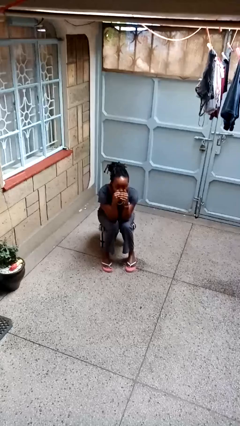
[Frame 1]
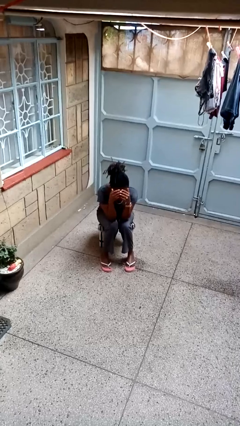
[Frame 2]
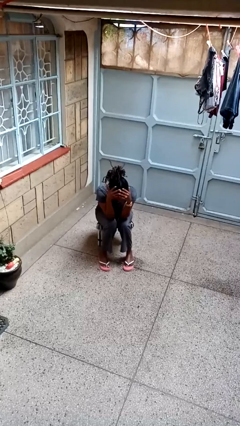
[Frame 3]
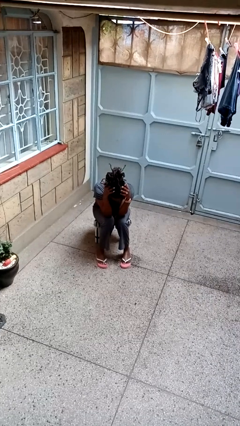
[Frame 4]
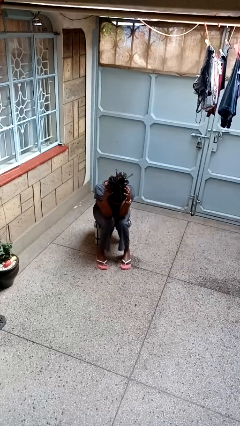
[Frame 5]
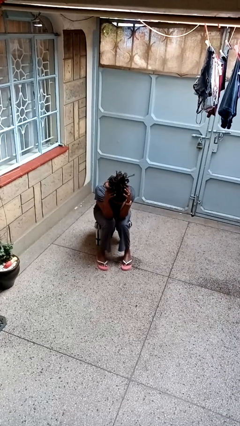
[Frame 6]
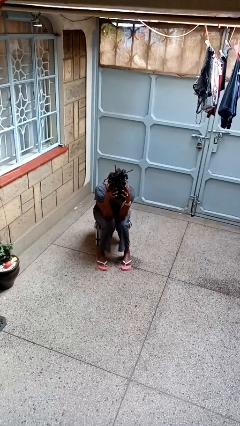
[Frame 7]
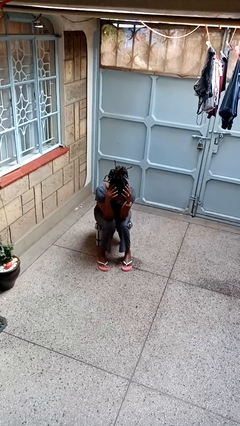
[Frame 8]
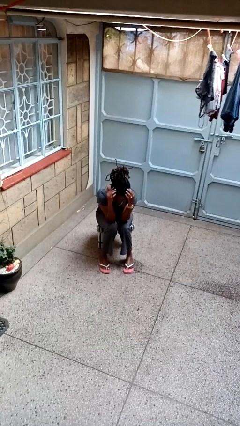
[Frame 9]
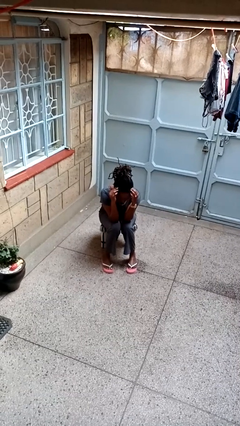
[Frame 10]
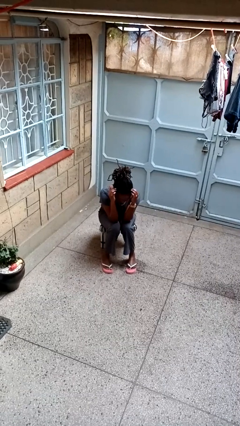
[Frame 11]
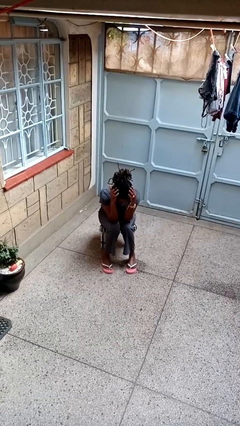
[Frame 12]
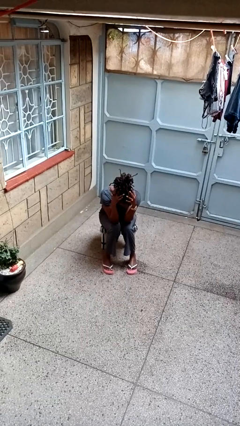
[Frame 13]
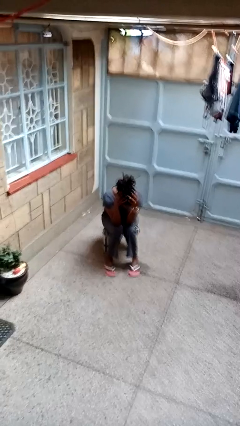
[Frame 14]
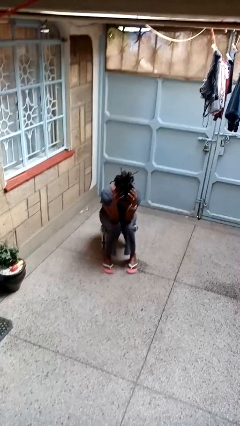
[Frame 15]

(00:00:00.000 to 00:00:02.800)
person strokes hair

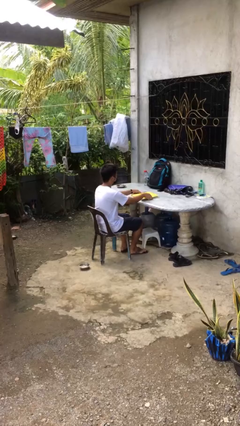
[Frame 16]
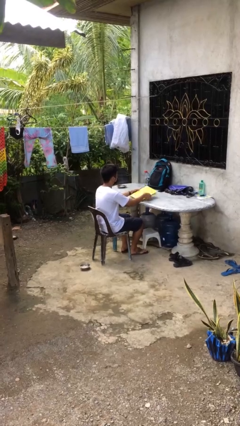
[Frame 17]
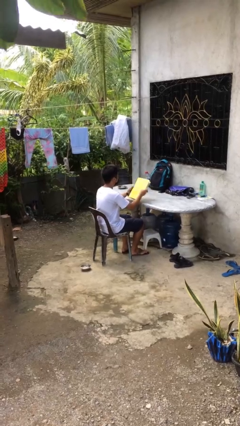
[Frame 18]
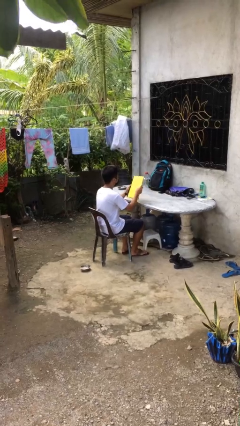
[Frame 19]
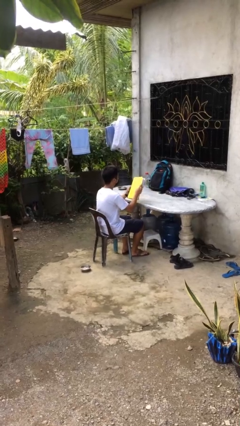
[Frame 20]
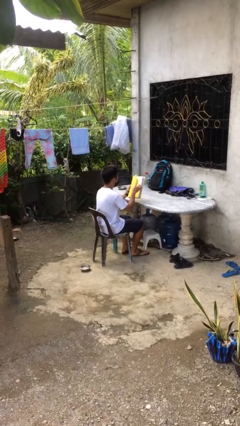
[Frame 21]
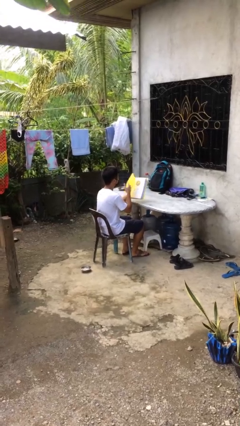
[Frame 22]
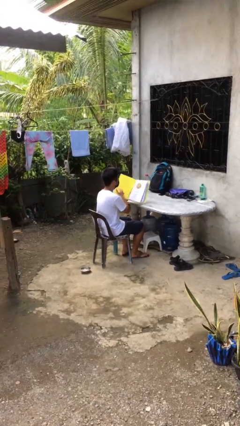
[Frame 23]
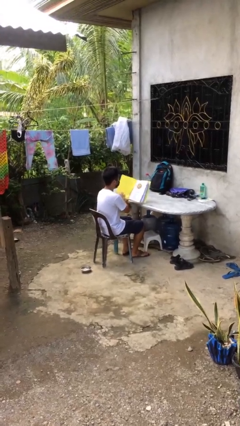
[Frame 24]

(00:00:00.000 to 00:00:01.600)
person picks up object from table

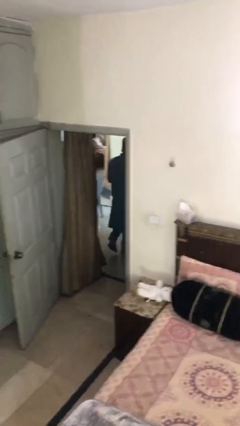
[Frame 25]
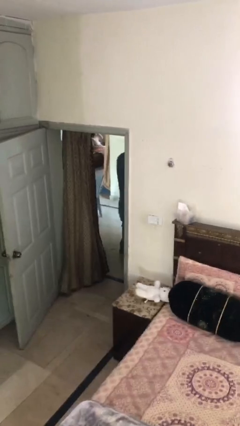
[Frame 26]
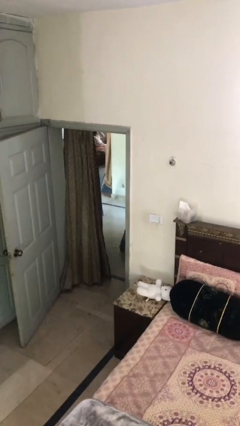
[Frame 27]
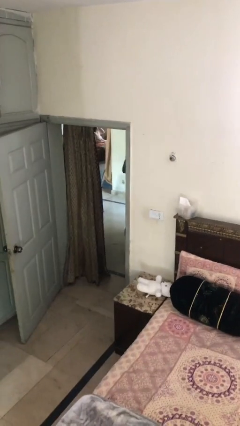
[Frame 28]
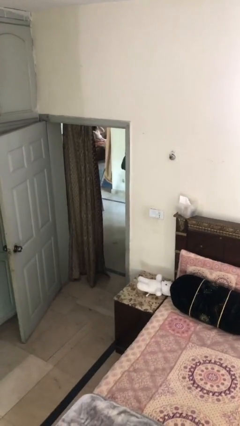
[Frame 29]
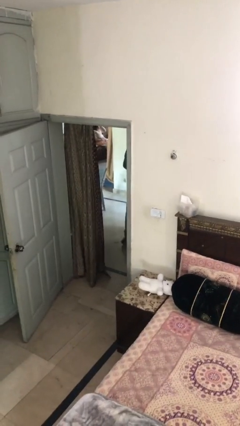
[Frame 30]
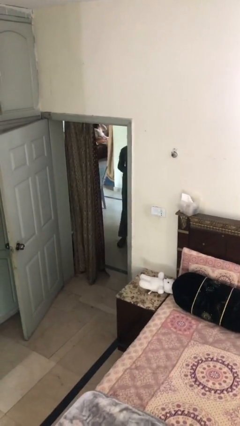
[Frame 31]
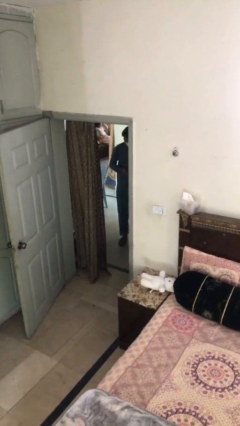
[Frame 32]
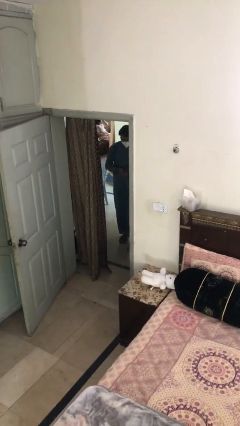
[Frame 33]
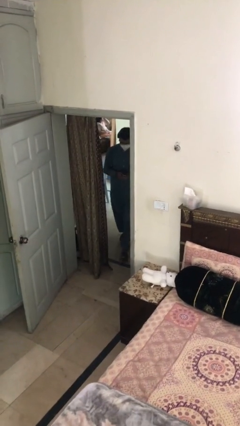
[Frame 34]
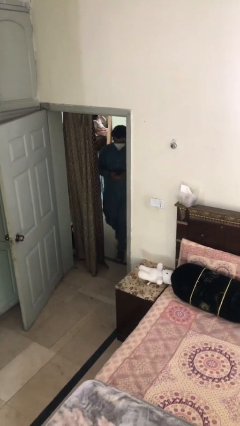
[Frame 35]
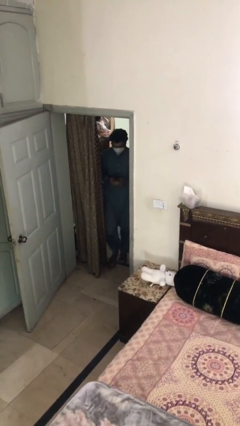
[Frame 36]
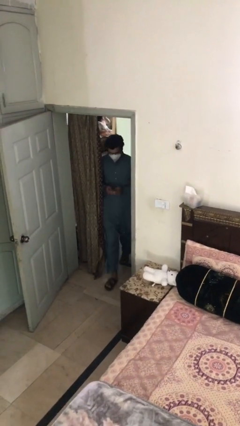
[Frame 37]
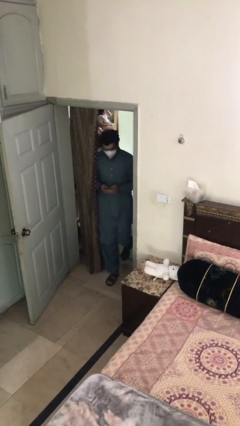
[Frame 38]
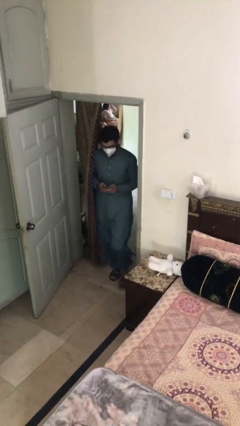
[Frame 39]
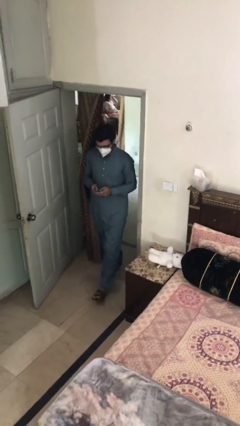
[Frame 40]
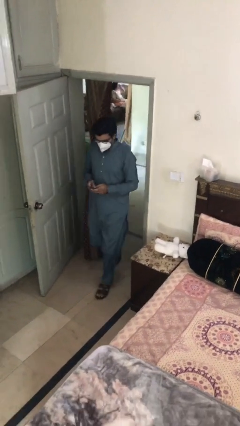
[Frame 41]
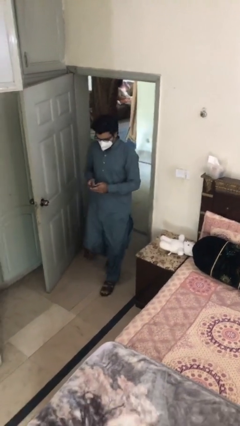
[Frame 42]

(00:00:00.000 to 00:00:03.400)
person enters scene through structure

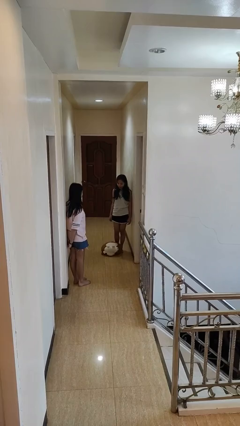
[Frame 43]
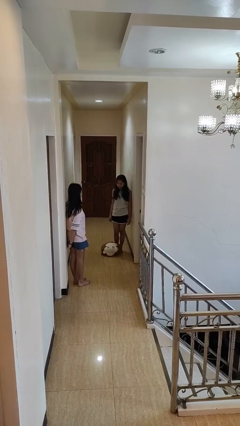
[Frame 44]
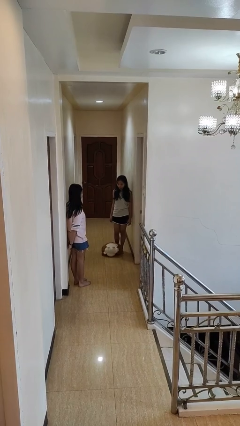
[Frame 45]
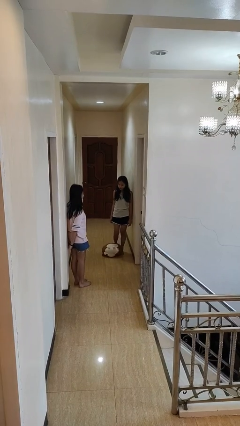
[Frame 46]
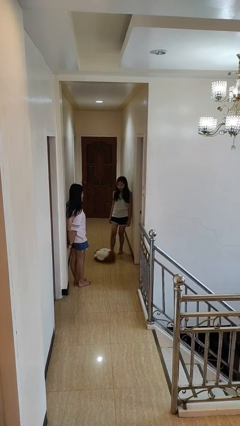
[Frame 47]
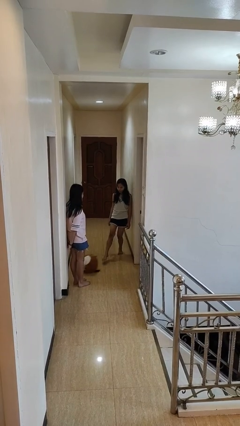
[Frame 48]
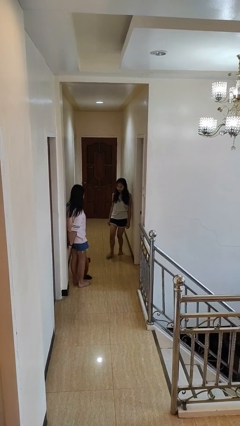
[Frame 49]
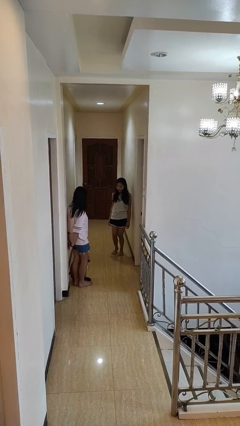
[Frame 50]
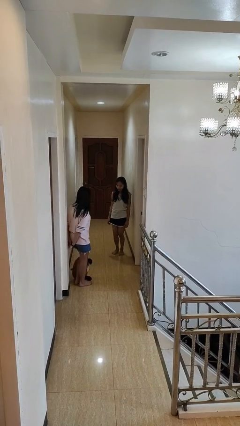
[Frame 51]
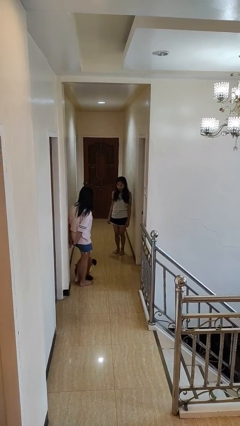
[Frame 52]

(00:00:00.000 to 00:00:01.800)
person kicks object to person

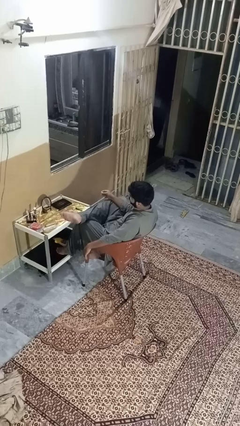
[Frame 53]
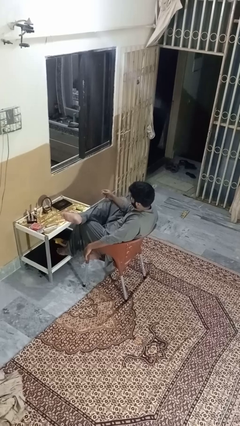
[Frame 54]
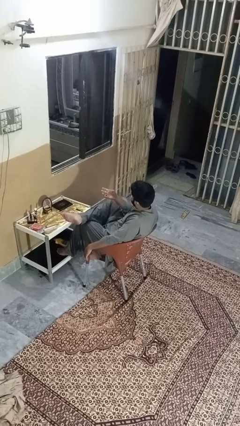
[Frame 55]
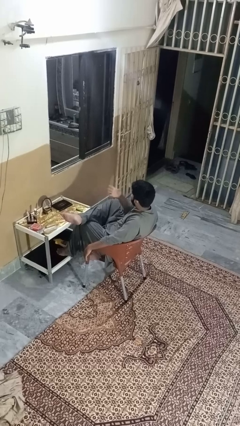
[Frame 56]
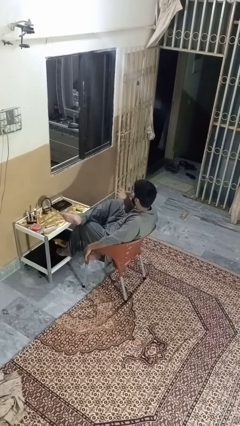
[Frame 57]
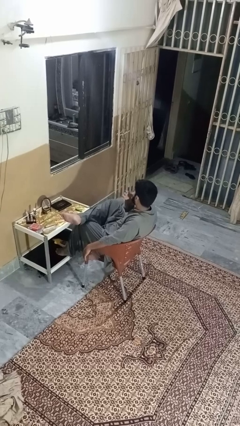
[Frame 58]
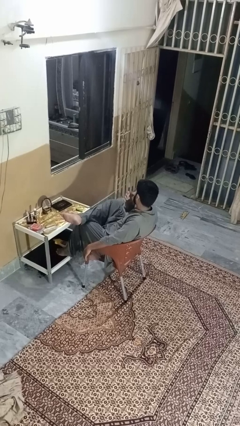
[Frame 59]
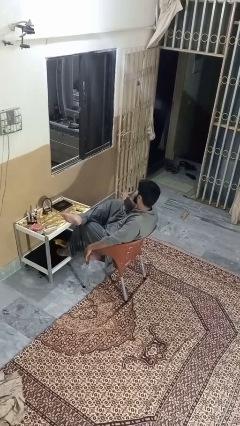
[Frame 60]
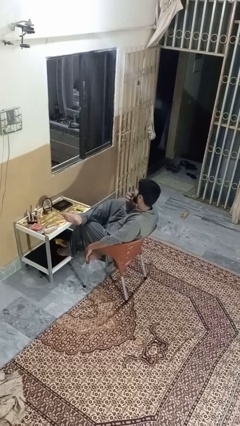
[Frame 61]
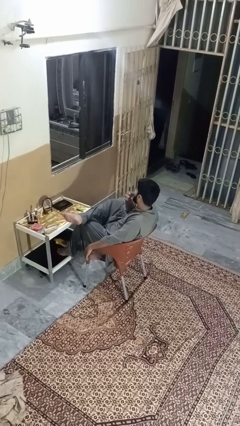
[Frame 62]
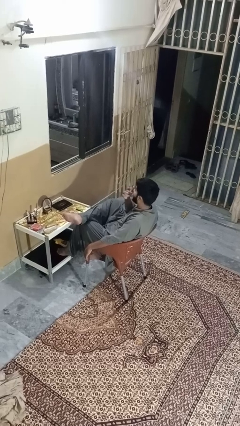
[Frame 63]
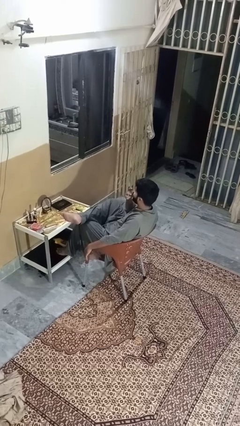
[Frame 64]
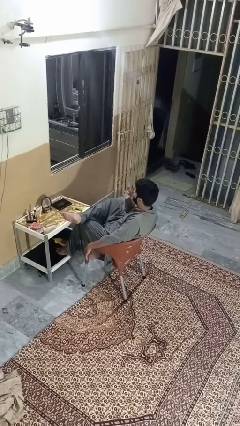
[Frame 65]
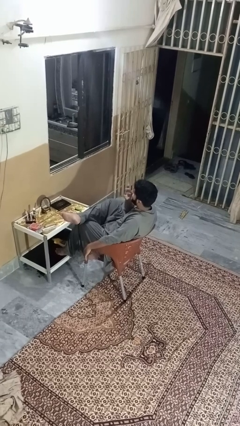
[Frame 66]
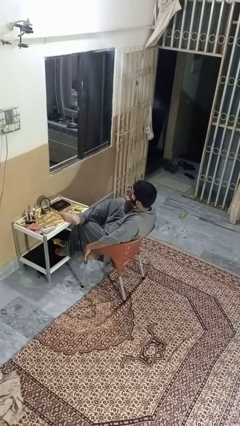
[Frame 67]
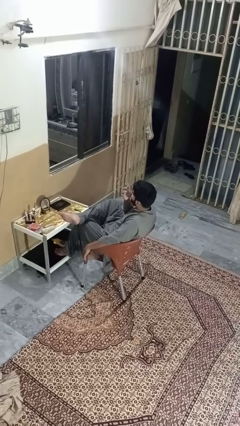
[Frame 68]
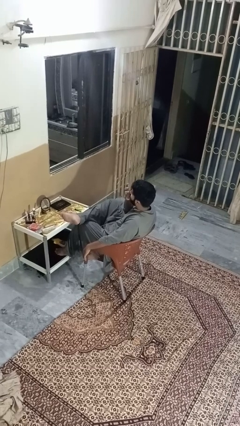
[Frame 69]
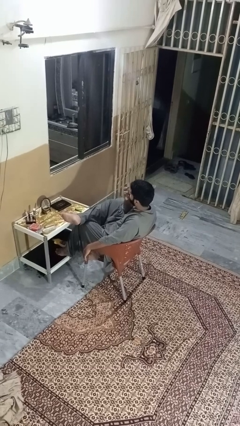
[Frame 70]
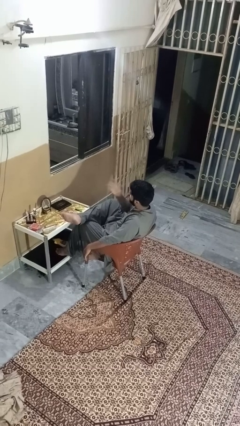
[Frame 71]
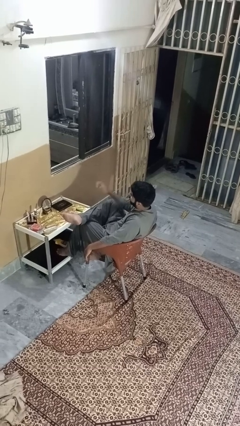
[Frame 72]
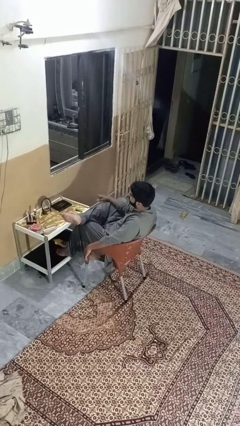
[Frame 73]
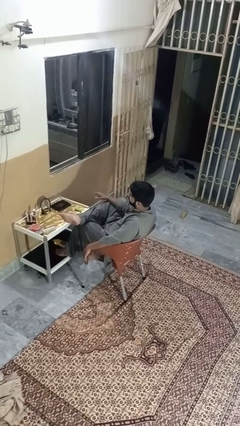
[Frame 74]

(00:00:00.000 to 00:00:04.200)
person licks fingers

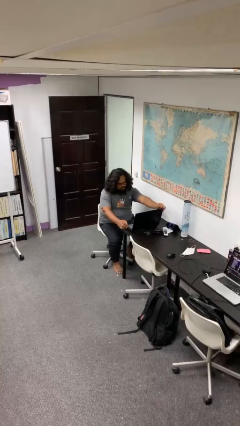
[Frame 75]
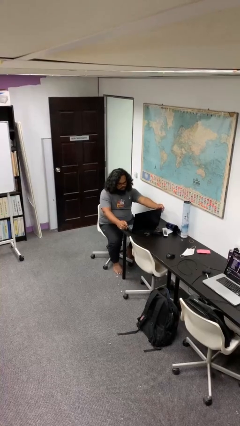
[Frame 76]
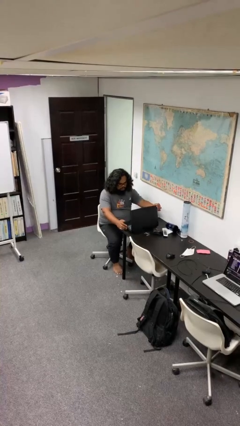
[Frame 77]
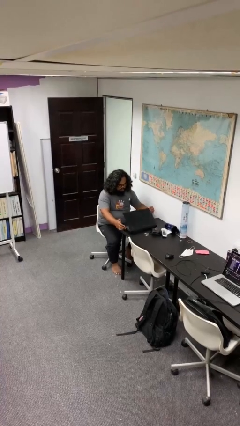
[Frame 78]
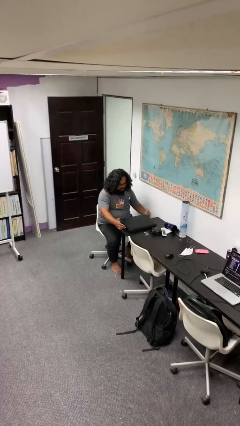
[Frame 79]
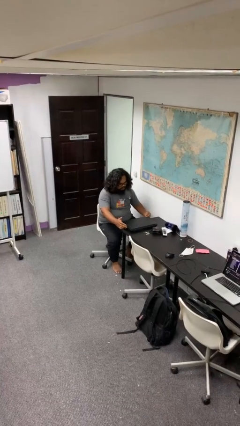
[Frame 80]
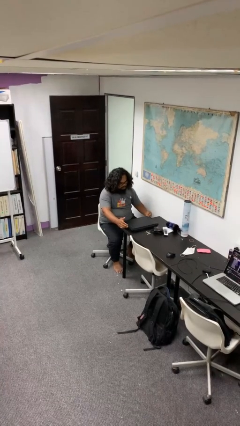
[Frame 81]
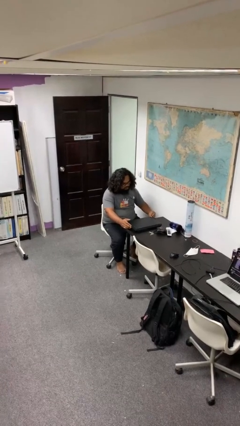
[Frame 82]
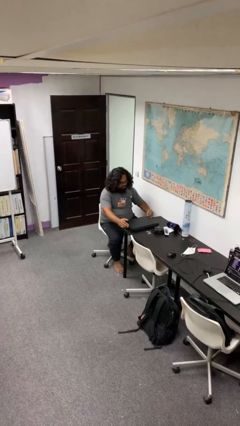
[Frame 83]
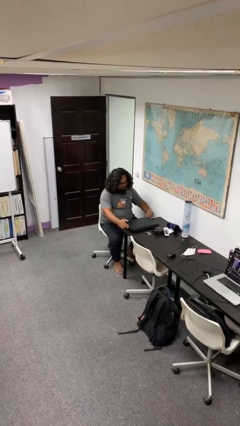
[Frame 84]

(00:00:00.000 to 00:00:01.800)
person closes laptop

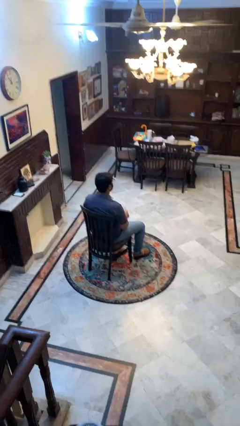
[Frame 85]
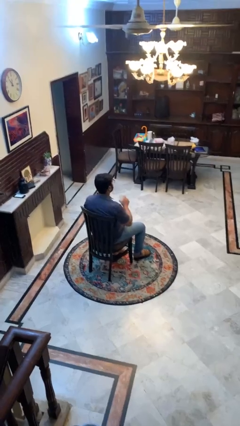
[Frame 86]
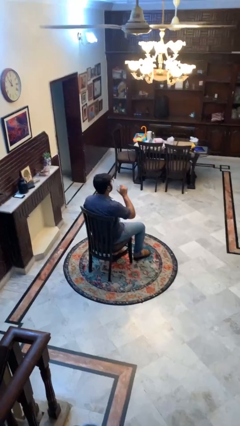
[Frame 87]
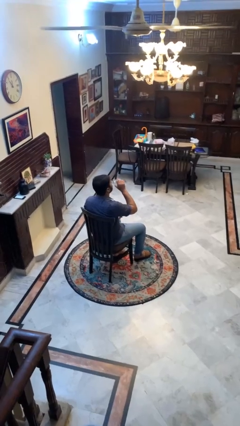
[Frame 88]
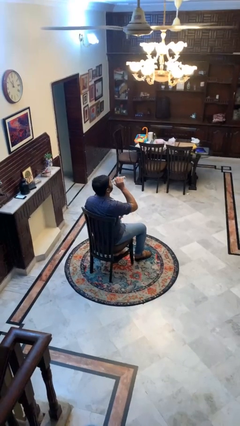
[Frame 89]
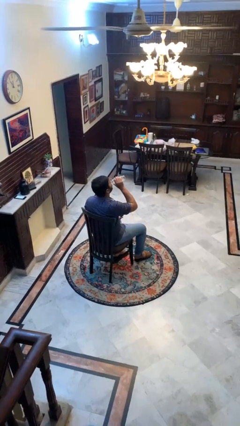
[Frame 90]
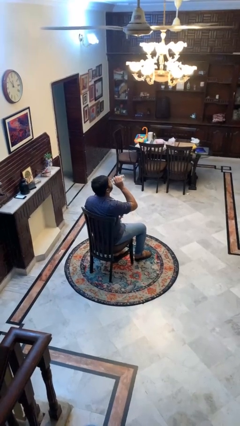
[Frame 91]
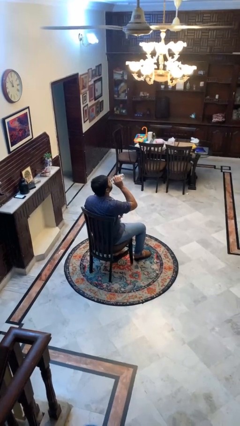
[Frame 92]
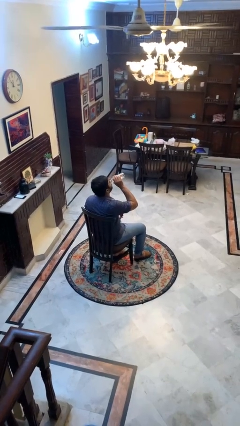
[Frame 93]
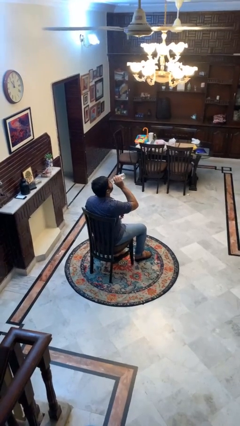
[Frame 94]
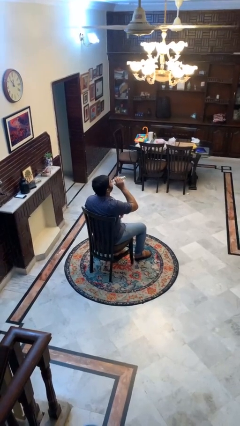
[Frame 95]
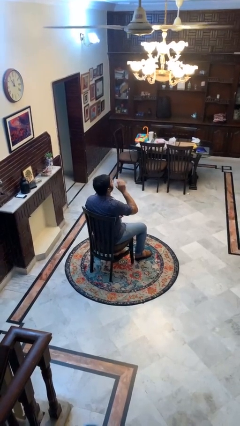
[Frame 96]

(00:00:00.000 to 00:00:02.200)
person drinks from bottle
